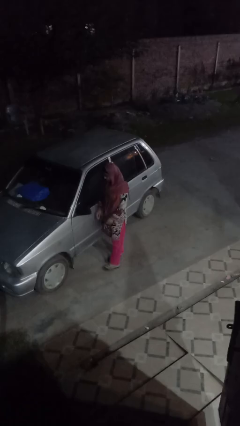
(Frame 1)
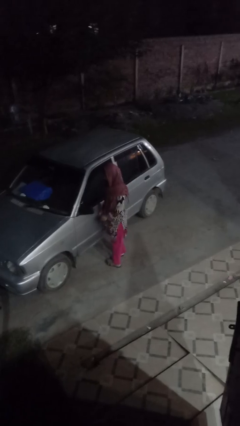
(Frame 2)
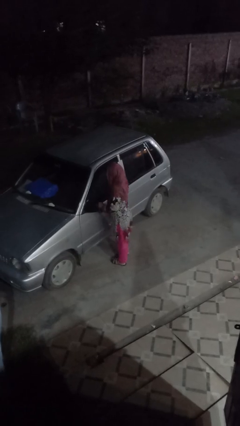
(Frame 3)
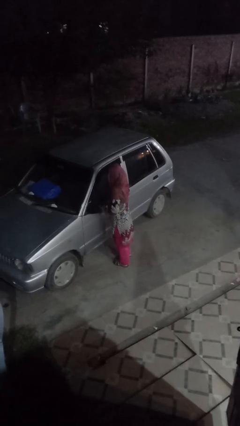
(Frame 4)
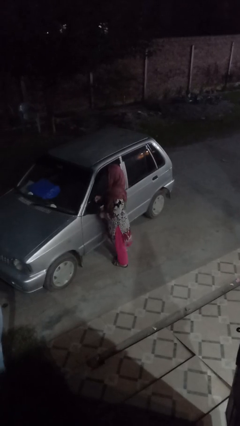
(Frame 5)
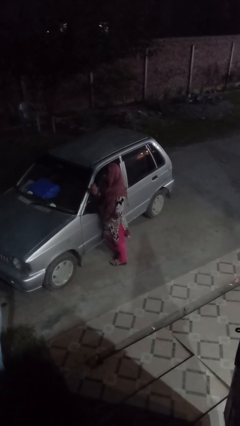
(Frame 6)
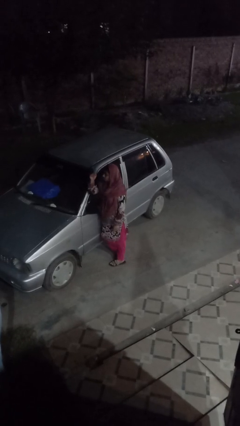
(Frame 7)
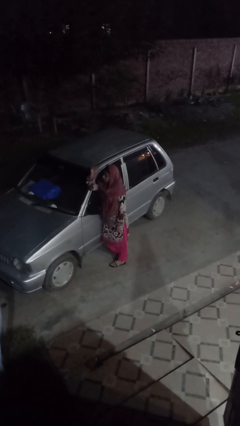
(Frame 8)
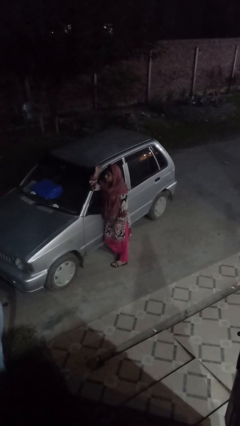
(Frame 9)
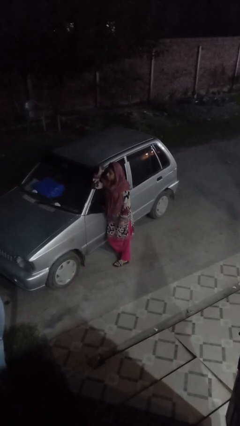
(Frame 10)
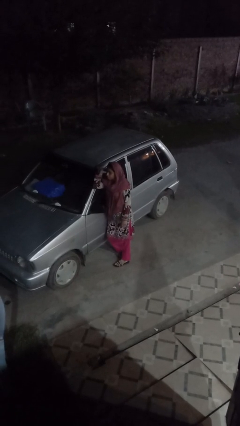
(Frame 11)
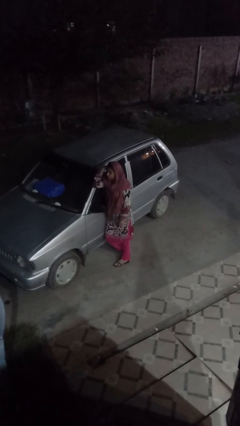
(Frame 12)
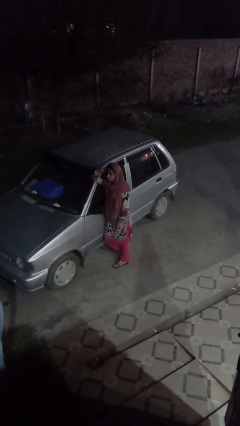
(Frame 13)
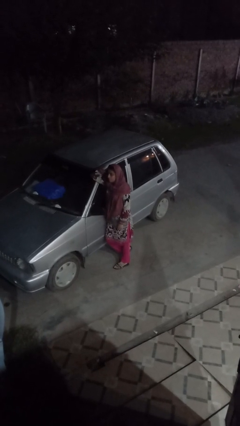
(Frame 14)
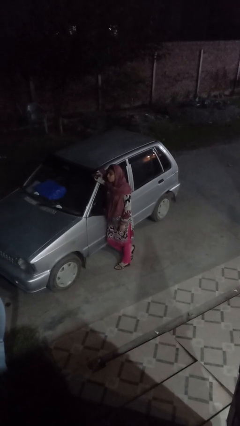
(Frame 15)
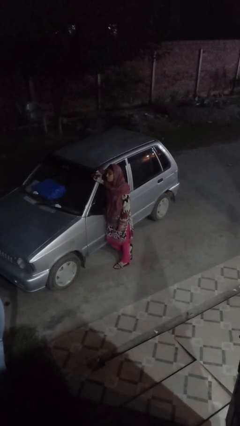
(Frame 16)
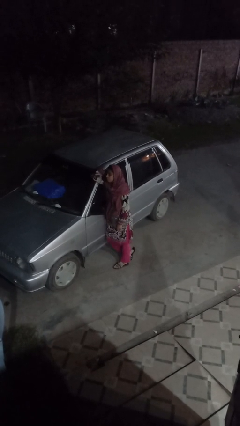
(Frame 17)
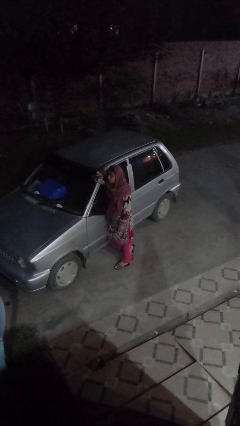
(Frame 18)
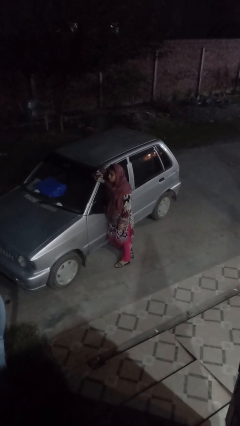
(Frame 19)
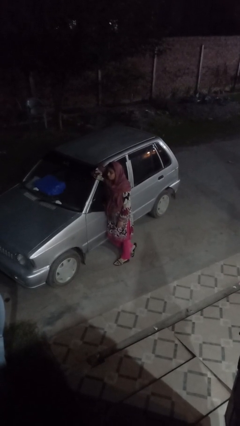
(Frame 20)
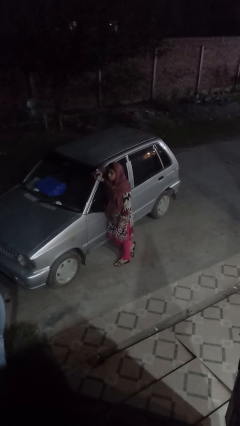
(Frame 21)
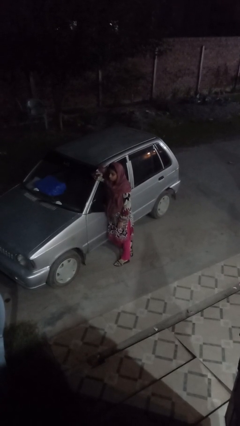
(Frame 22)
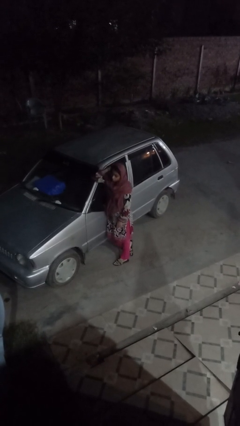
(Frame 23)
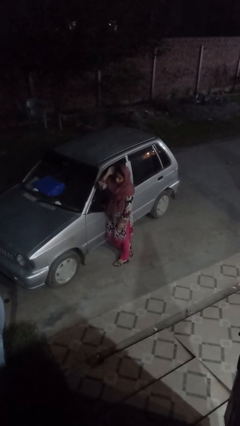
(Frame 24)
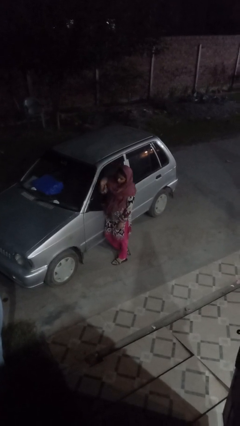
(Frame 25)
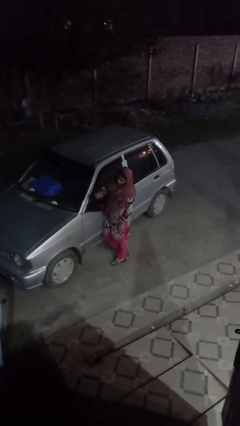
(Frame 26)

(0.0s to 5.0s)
person leans against car

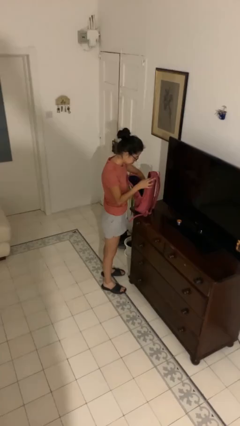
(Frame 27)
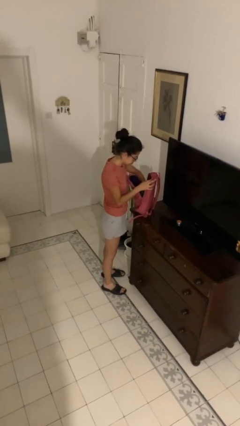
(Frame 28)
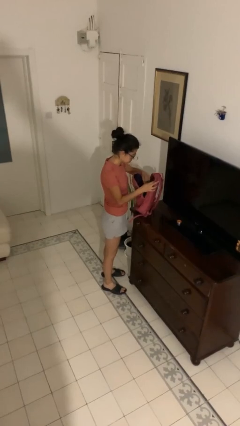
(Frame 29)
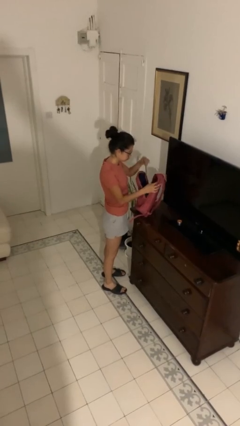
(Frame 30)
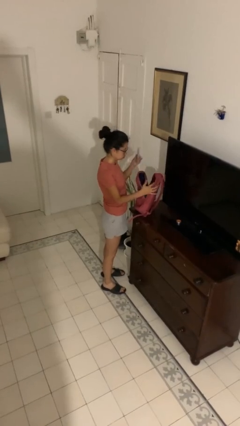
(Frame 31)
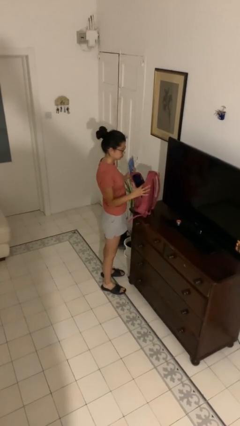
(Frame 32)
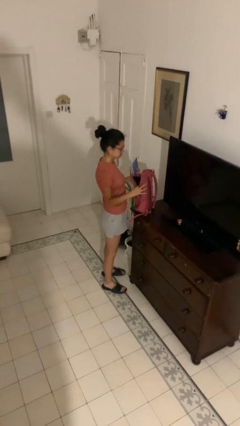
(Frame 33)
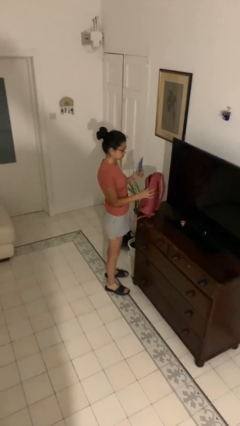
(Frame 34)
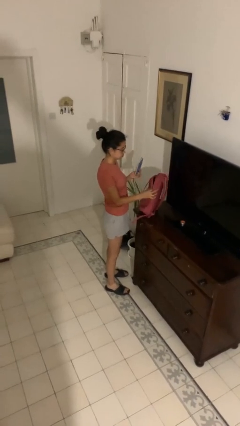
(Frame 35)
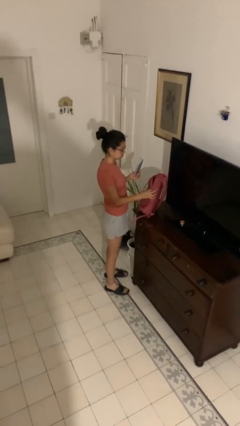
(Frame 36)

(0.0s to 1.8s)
person takes object from backpack

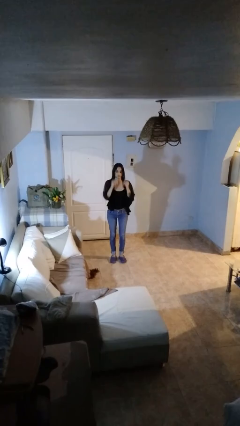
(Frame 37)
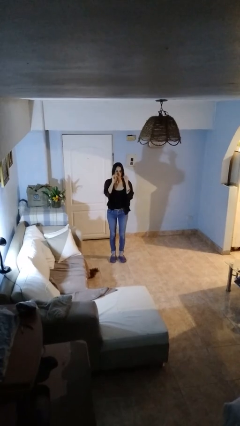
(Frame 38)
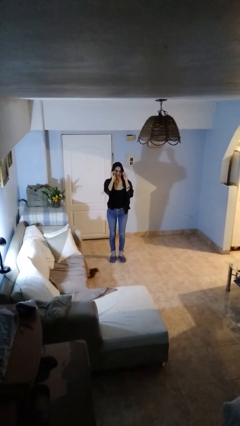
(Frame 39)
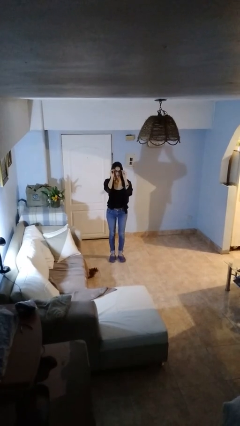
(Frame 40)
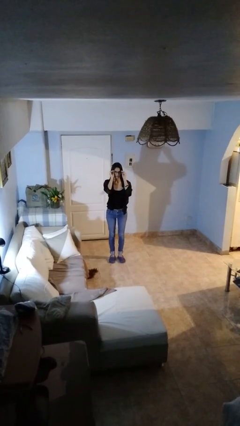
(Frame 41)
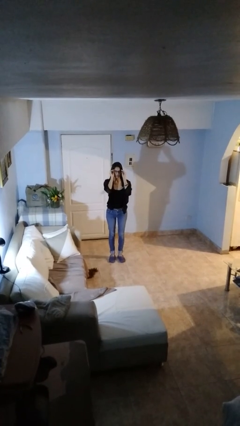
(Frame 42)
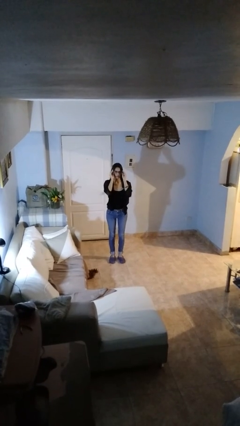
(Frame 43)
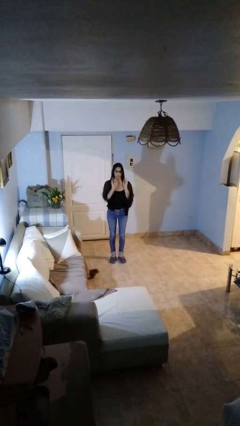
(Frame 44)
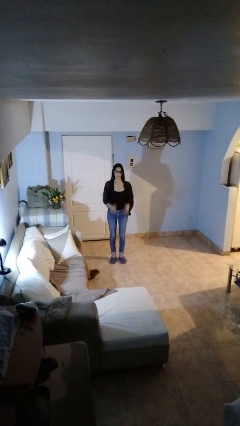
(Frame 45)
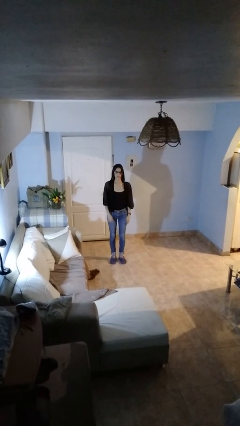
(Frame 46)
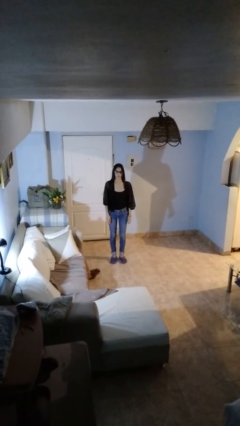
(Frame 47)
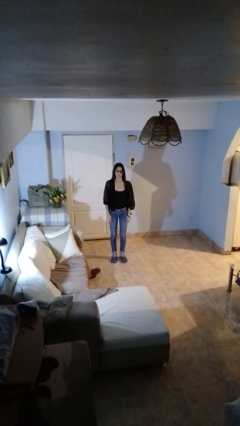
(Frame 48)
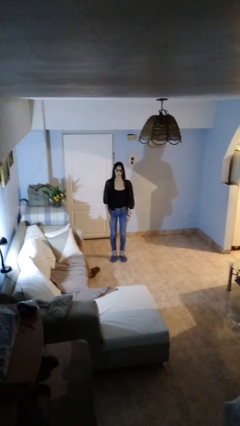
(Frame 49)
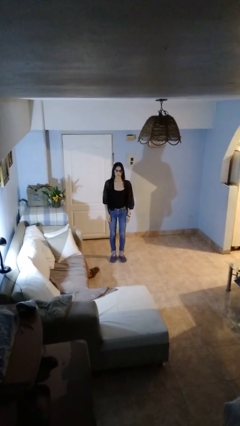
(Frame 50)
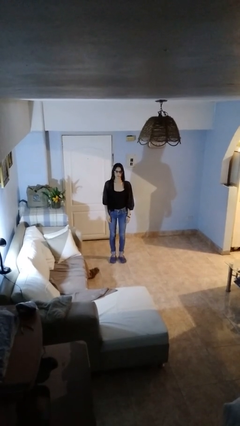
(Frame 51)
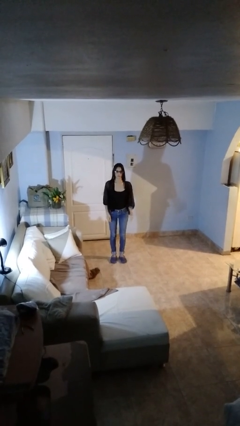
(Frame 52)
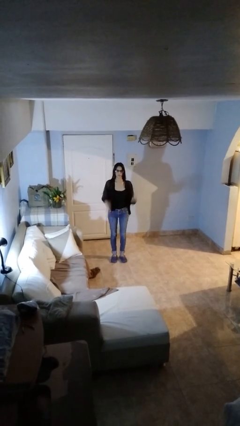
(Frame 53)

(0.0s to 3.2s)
person puts on glasses

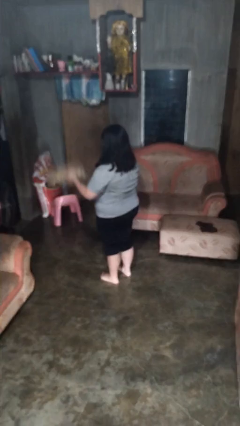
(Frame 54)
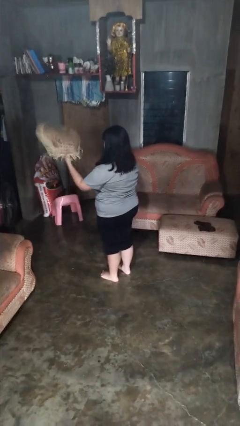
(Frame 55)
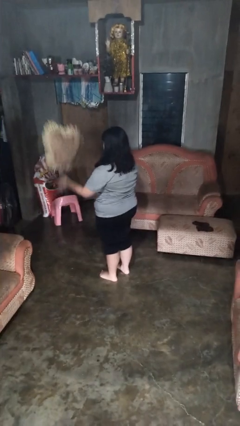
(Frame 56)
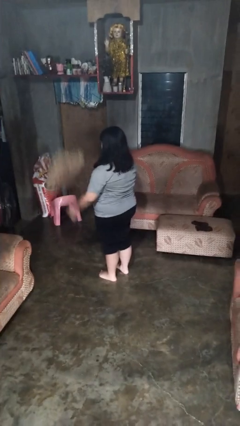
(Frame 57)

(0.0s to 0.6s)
person throws object into air

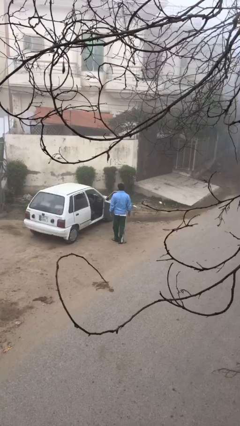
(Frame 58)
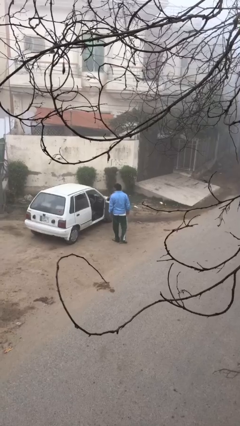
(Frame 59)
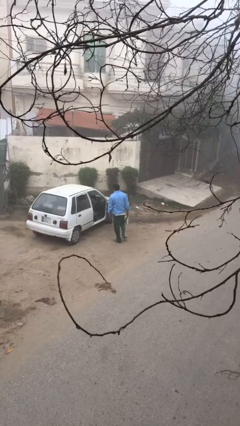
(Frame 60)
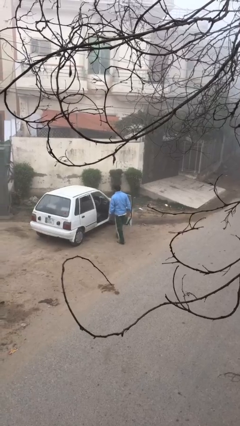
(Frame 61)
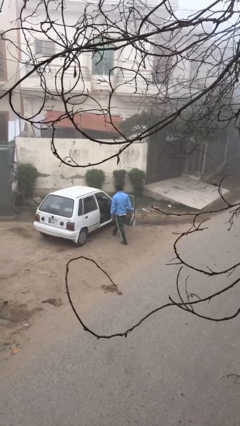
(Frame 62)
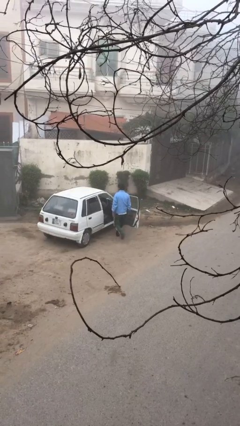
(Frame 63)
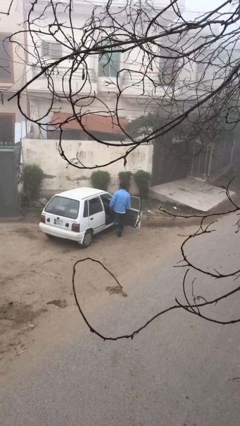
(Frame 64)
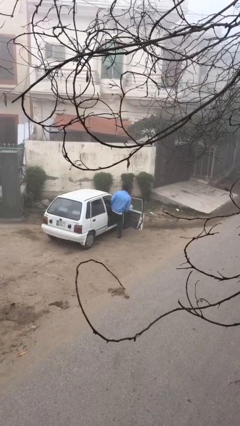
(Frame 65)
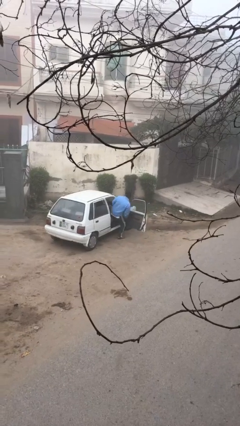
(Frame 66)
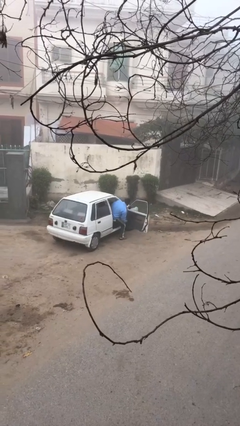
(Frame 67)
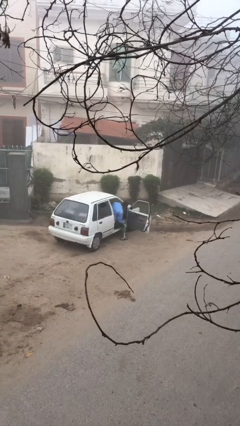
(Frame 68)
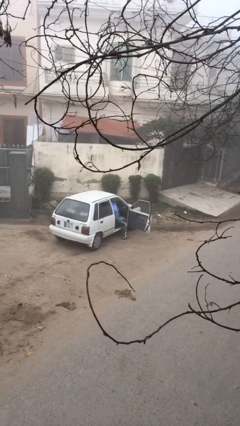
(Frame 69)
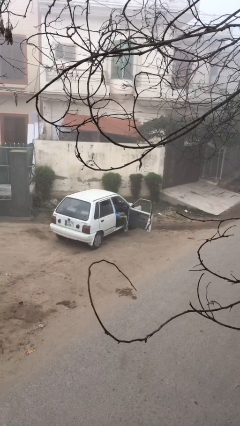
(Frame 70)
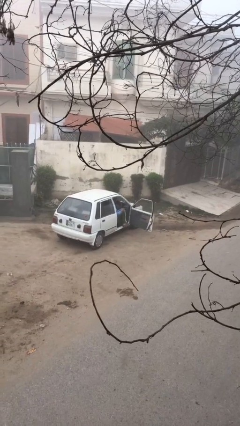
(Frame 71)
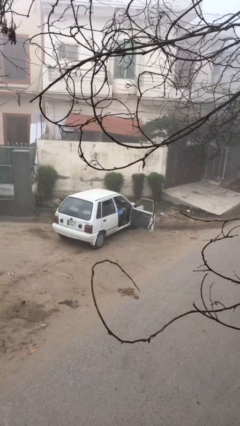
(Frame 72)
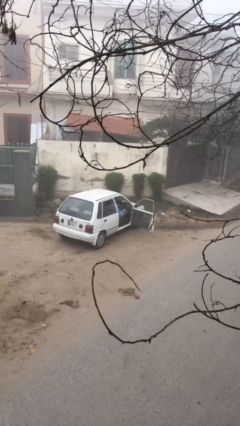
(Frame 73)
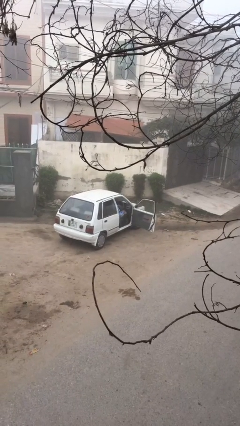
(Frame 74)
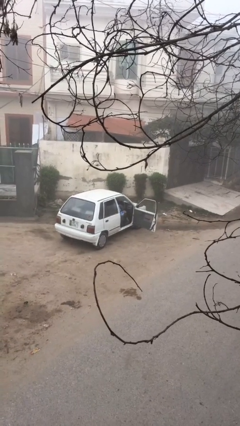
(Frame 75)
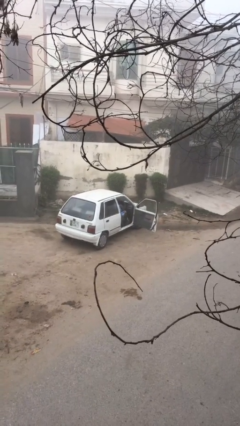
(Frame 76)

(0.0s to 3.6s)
person enters car

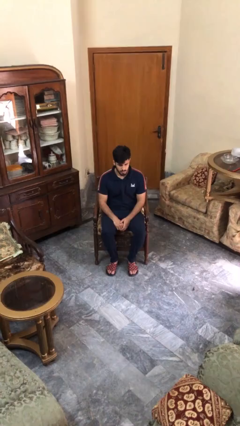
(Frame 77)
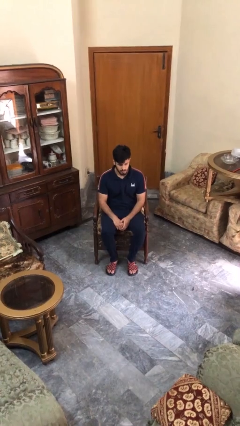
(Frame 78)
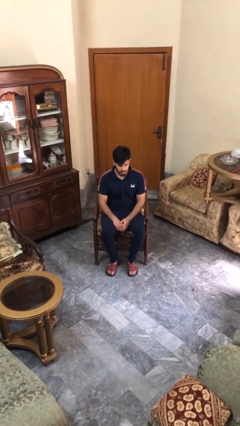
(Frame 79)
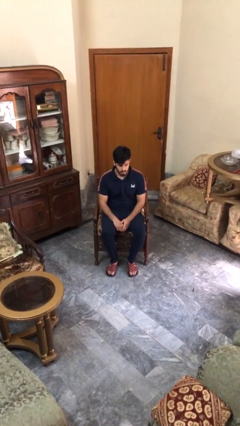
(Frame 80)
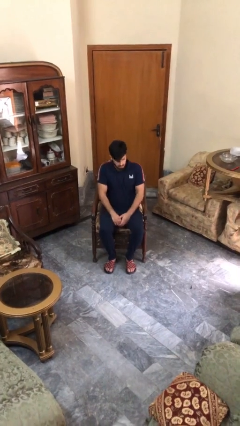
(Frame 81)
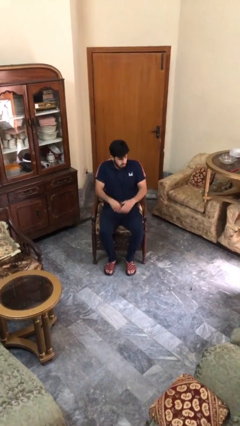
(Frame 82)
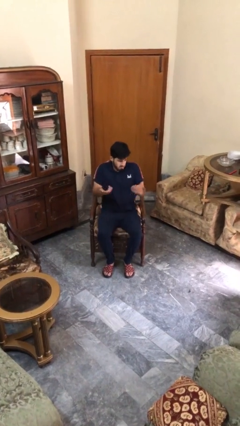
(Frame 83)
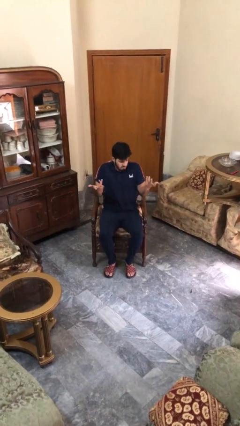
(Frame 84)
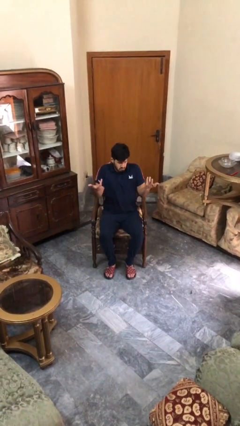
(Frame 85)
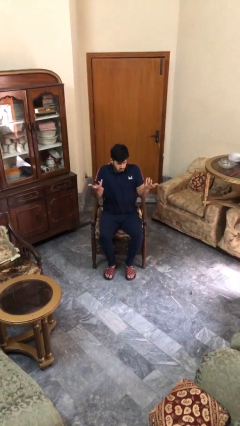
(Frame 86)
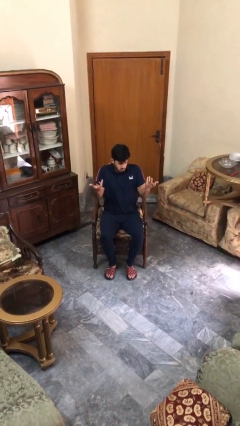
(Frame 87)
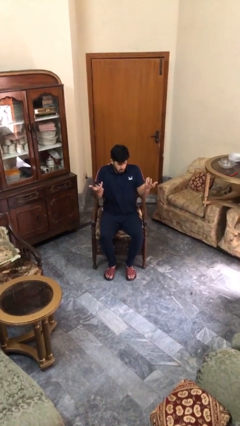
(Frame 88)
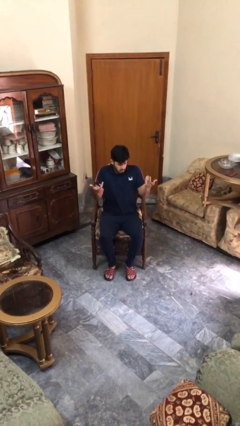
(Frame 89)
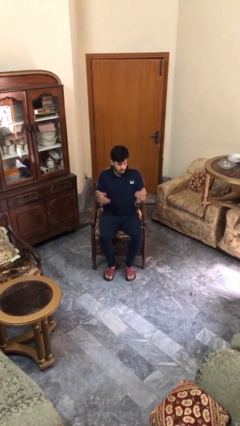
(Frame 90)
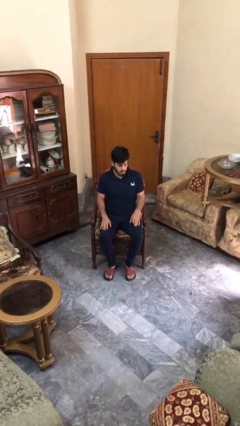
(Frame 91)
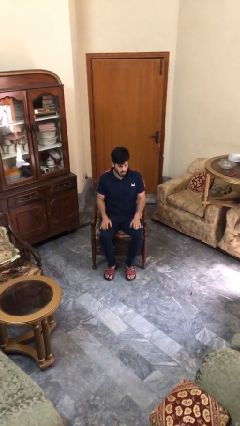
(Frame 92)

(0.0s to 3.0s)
person shrugs
